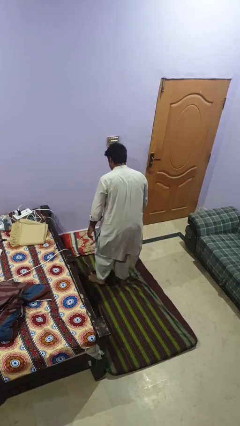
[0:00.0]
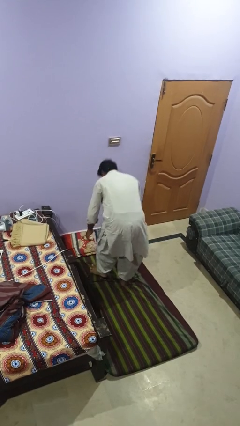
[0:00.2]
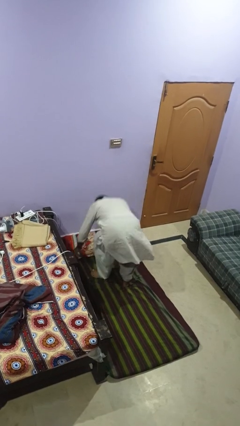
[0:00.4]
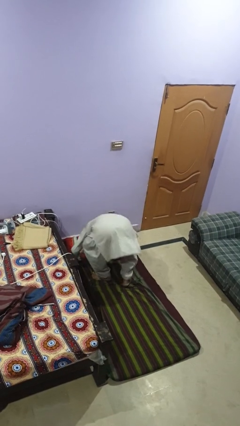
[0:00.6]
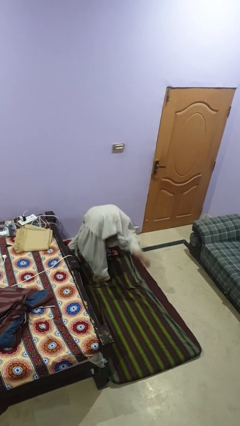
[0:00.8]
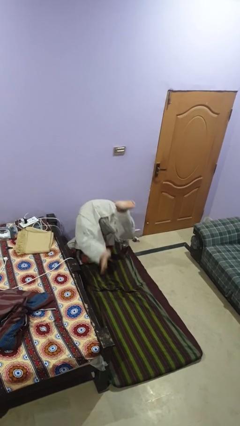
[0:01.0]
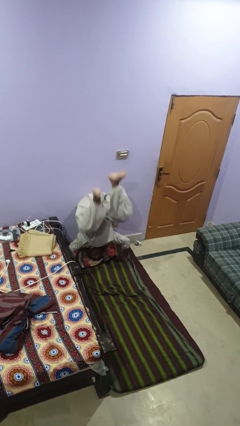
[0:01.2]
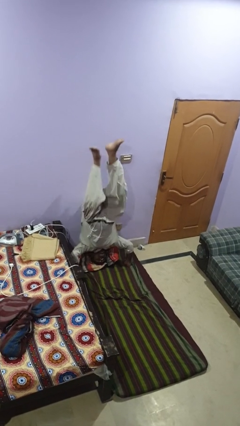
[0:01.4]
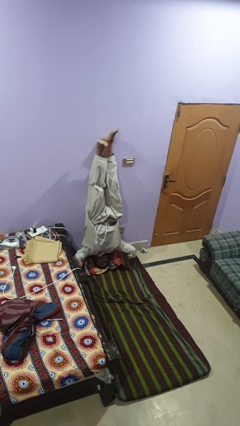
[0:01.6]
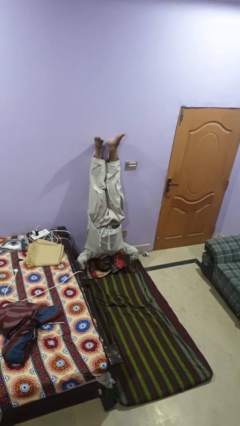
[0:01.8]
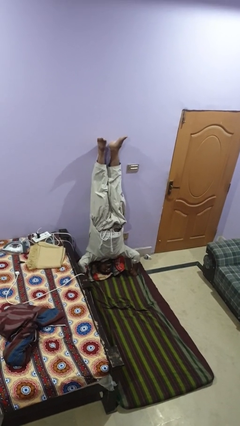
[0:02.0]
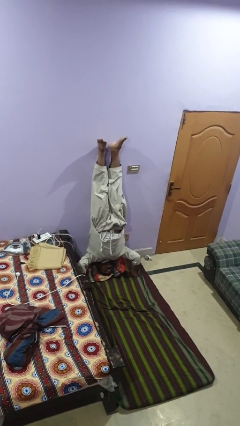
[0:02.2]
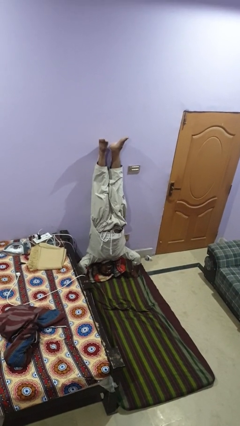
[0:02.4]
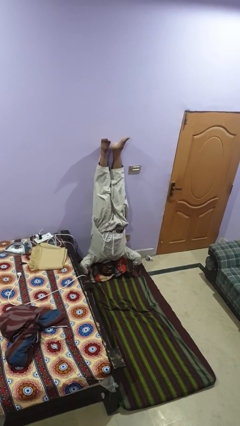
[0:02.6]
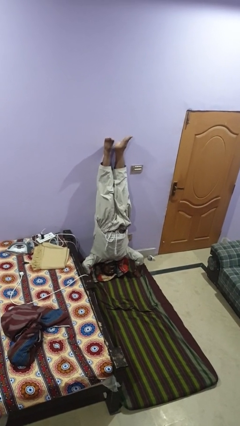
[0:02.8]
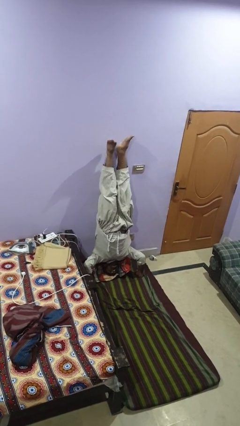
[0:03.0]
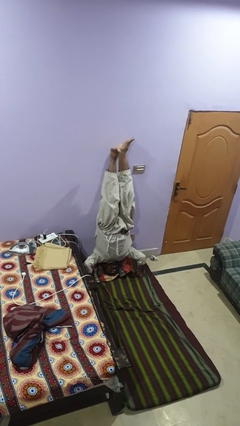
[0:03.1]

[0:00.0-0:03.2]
person handstand

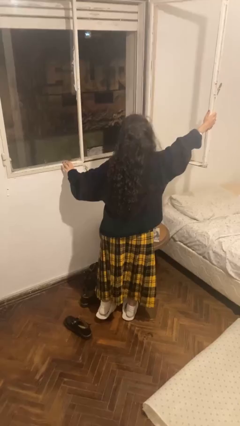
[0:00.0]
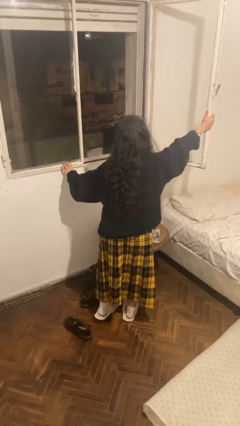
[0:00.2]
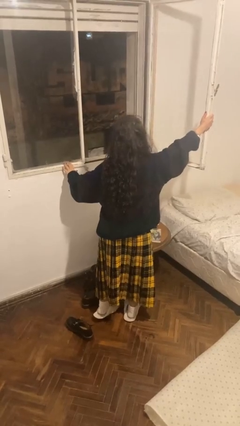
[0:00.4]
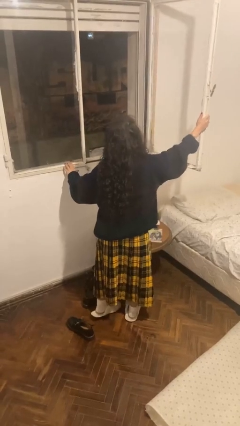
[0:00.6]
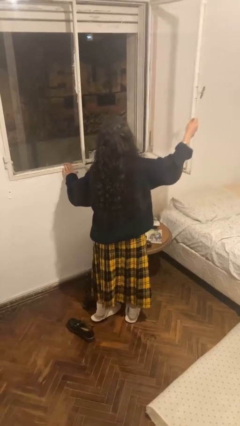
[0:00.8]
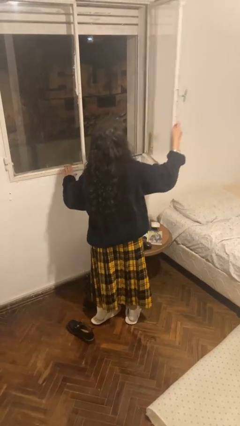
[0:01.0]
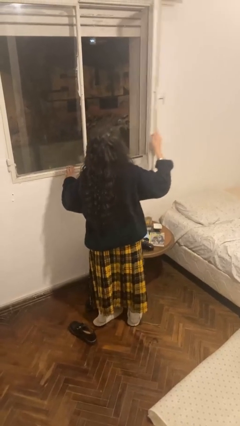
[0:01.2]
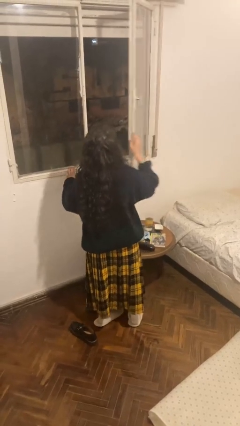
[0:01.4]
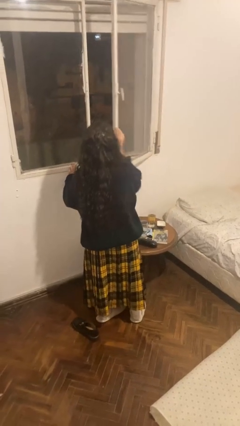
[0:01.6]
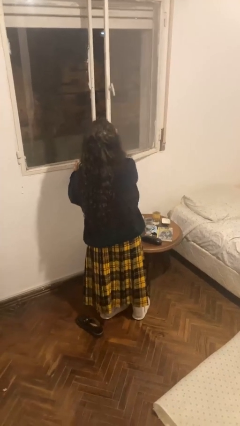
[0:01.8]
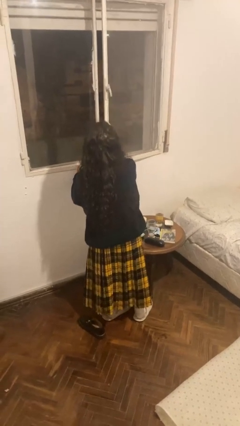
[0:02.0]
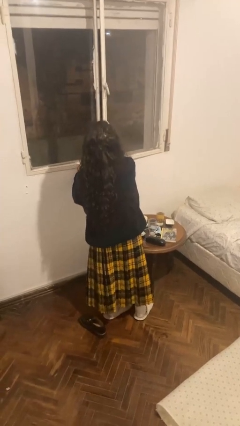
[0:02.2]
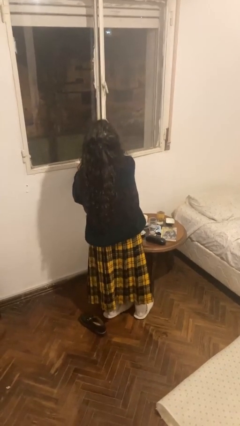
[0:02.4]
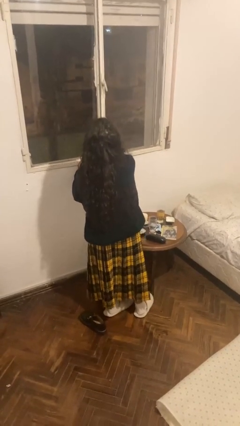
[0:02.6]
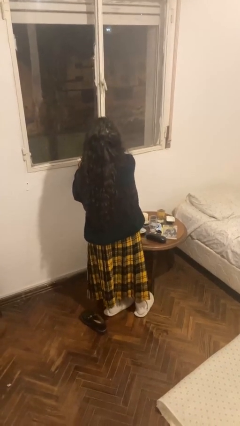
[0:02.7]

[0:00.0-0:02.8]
person closes home window

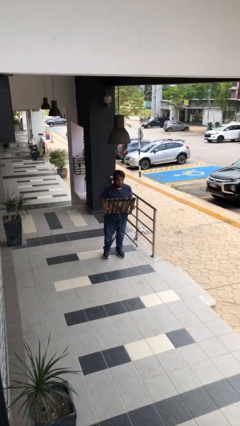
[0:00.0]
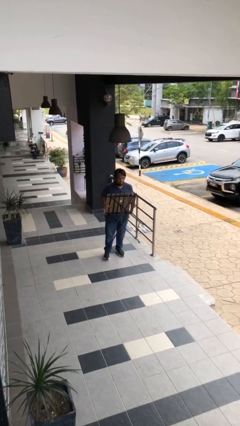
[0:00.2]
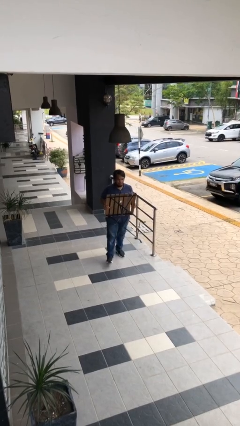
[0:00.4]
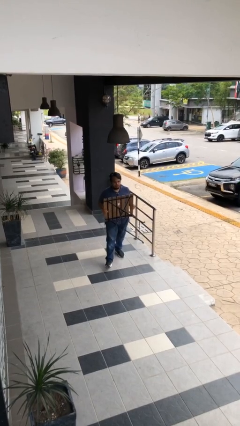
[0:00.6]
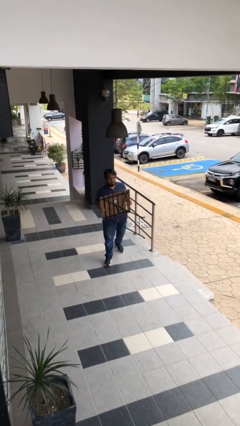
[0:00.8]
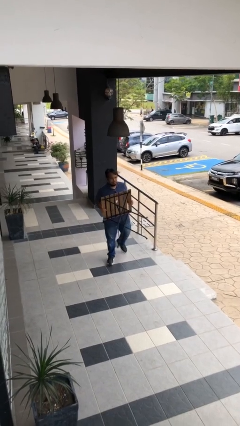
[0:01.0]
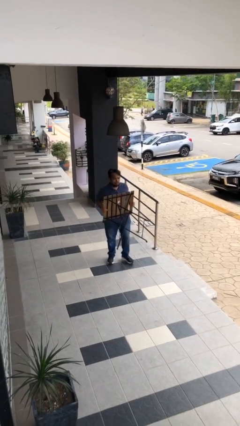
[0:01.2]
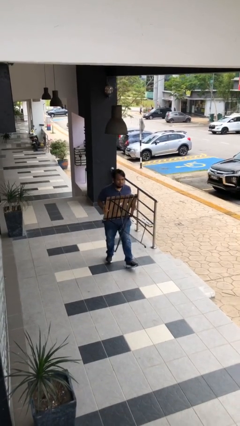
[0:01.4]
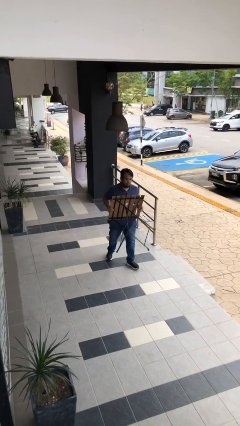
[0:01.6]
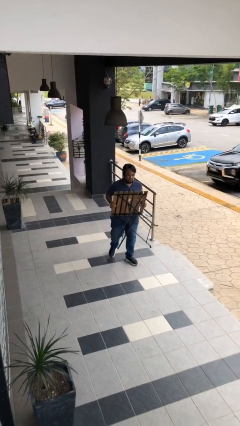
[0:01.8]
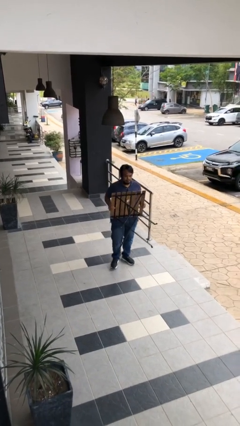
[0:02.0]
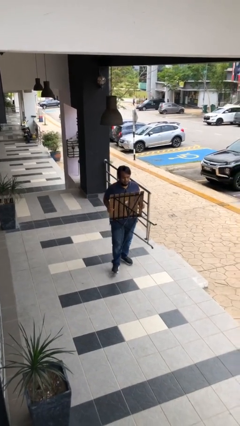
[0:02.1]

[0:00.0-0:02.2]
person carries heavy object

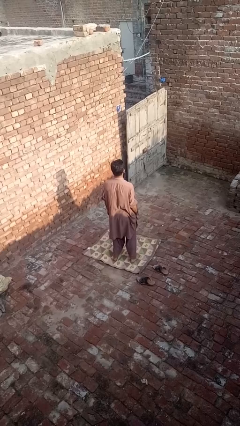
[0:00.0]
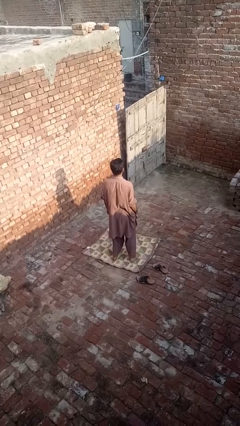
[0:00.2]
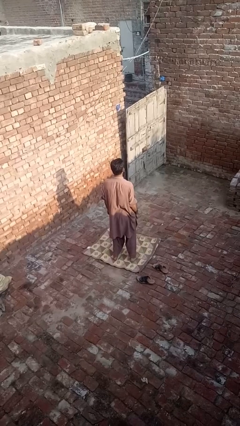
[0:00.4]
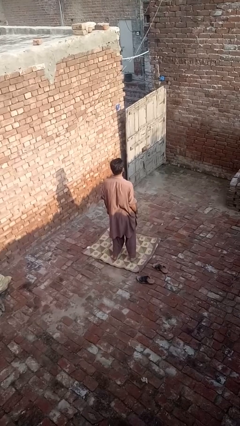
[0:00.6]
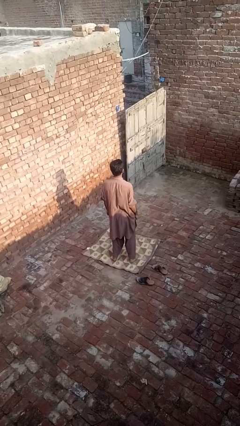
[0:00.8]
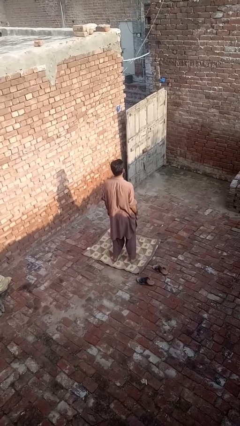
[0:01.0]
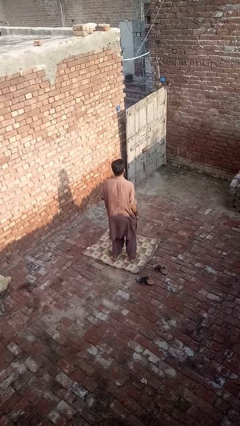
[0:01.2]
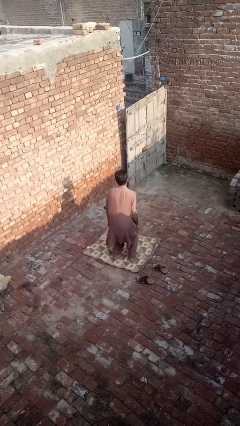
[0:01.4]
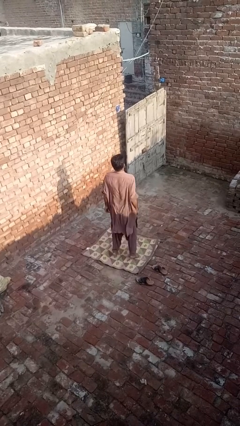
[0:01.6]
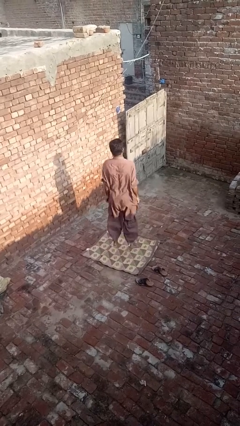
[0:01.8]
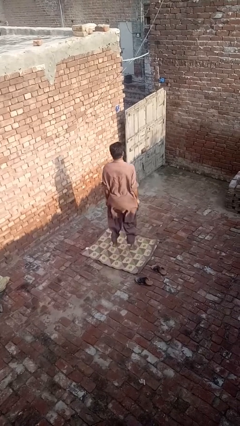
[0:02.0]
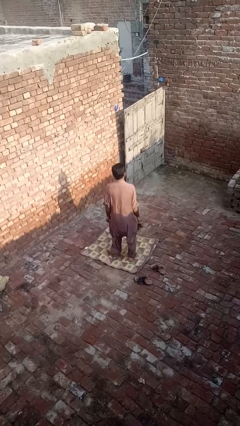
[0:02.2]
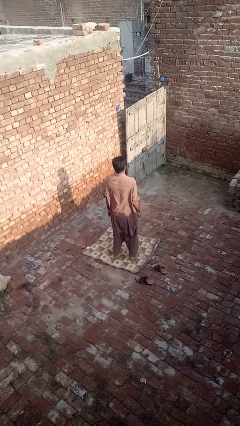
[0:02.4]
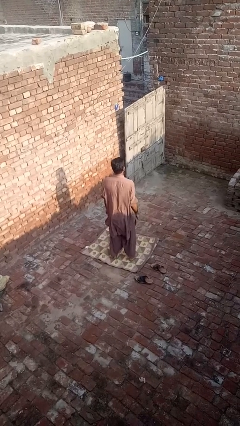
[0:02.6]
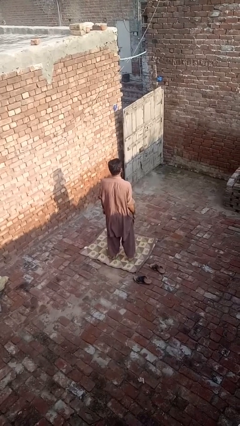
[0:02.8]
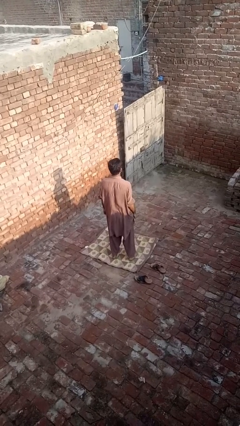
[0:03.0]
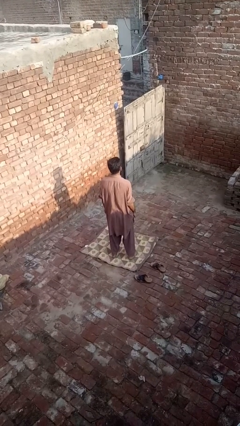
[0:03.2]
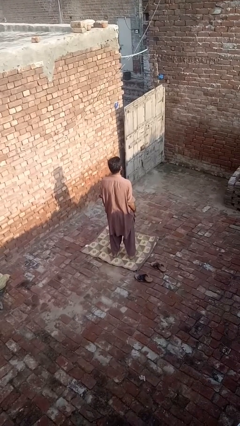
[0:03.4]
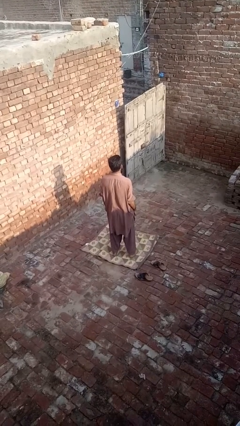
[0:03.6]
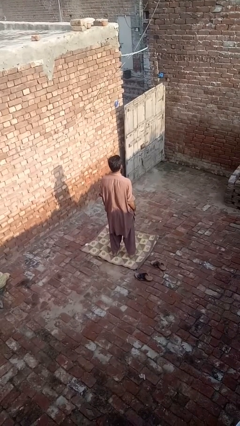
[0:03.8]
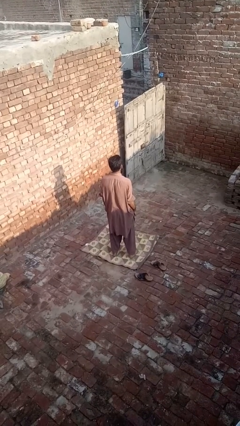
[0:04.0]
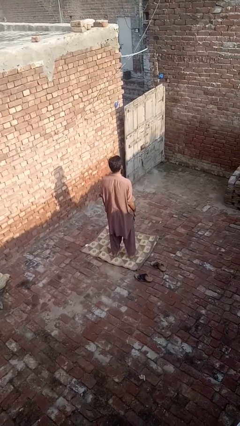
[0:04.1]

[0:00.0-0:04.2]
person jumps

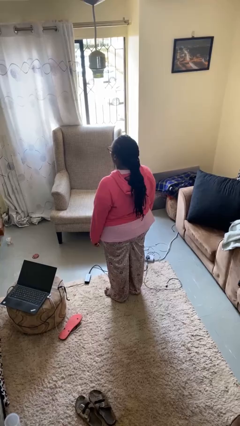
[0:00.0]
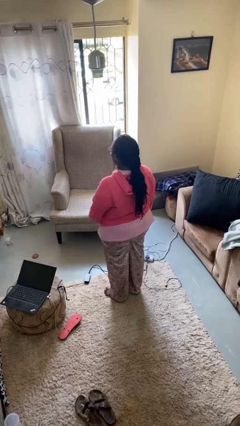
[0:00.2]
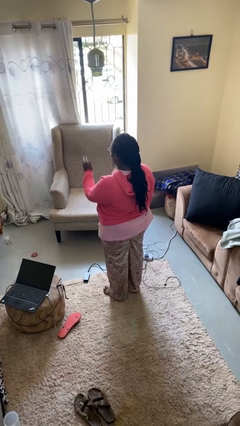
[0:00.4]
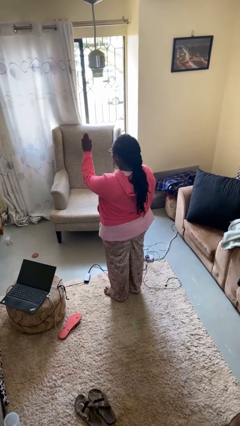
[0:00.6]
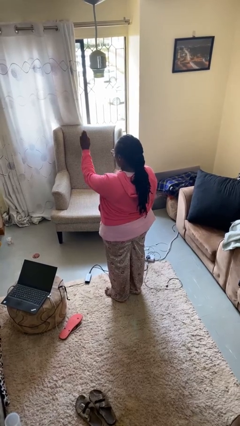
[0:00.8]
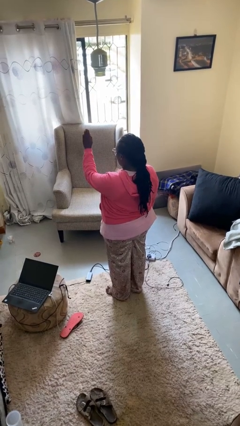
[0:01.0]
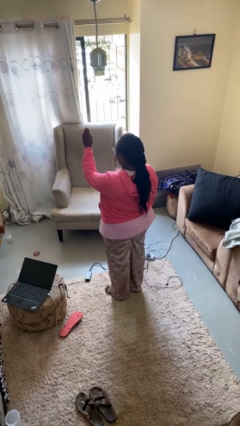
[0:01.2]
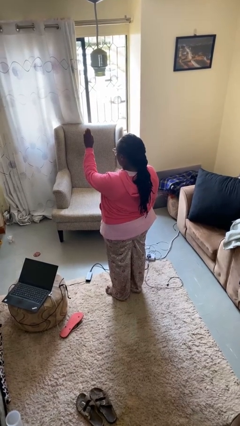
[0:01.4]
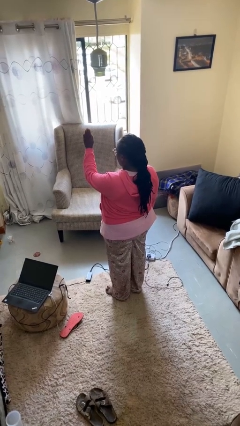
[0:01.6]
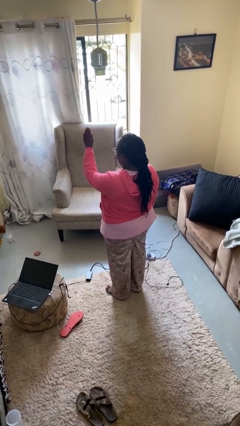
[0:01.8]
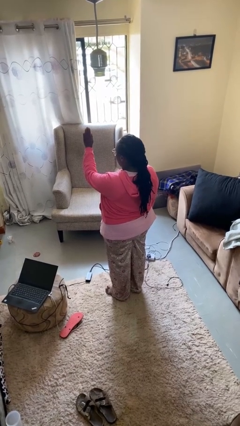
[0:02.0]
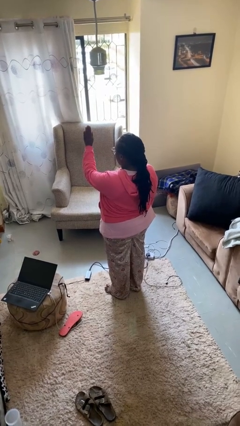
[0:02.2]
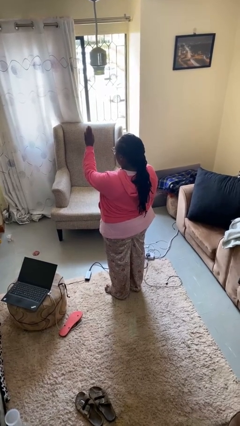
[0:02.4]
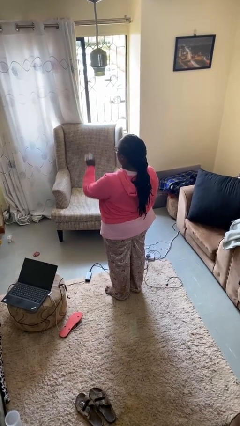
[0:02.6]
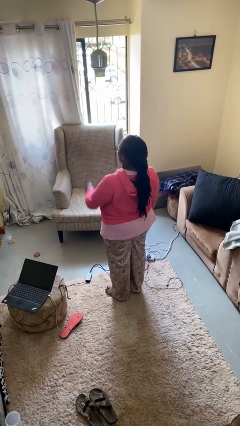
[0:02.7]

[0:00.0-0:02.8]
person gestures stop

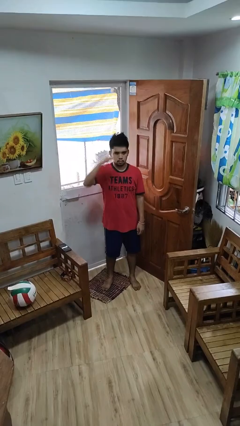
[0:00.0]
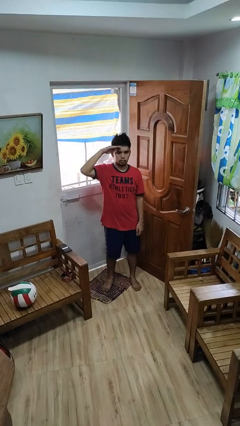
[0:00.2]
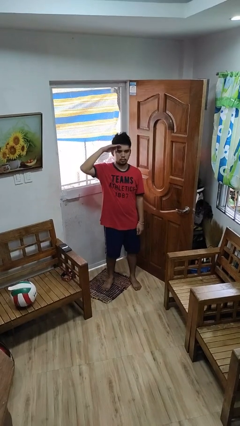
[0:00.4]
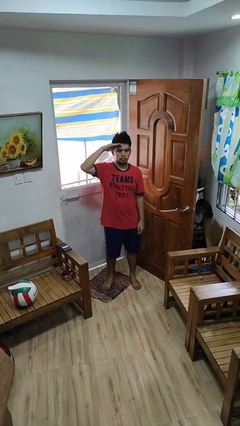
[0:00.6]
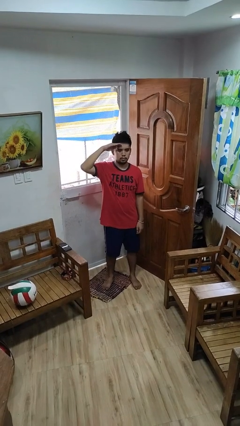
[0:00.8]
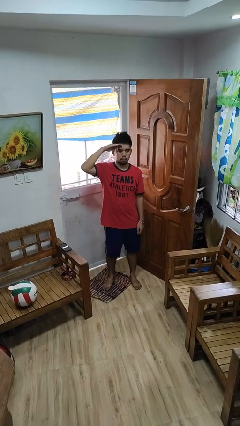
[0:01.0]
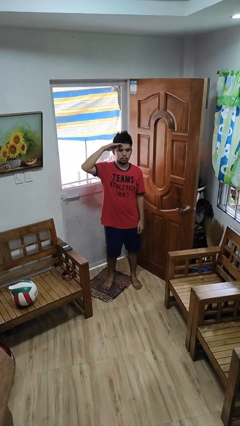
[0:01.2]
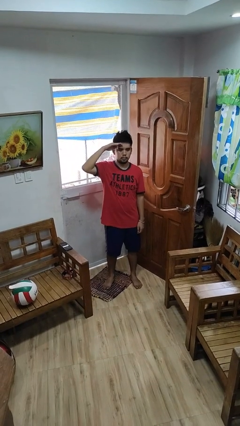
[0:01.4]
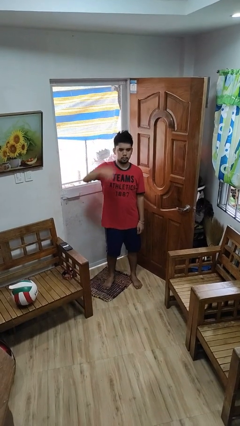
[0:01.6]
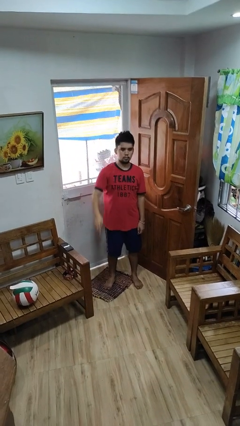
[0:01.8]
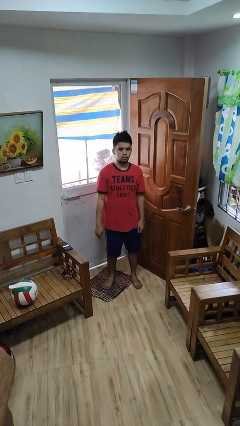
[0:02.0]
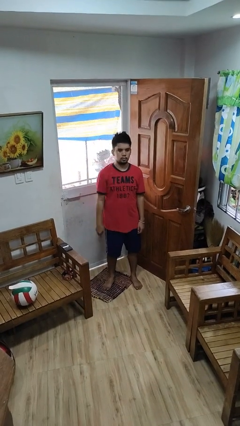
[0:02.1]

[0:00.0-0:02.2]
person salutes

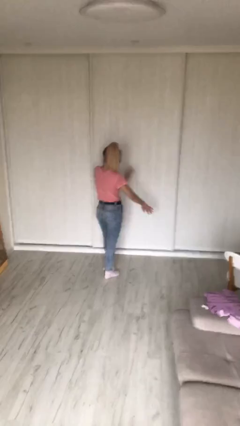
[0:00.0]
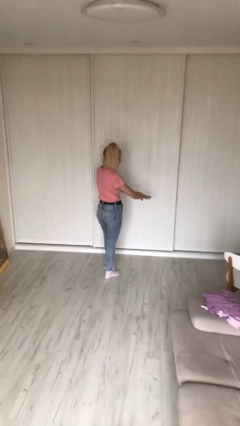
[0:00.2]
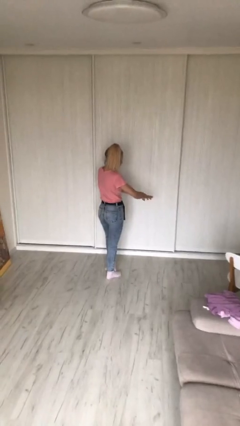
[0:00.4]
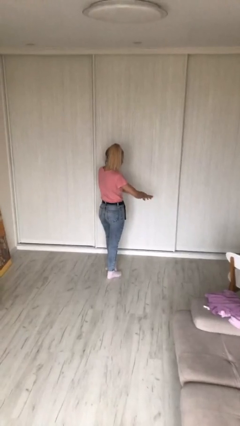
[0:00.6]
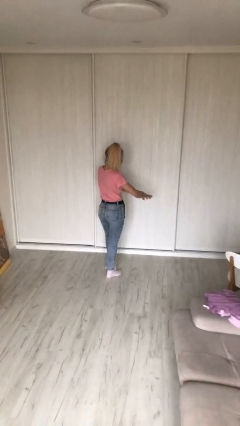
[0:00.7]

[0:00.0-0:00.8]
person swats bug
